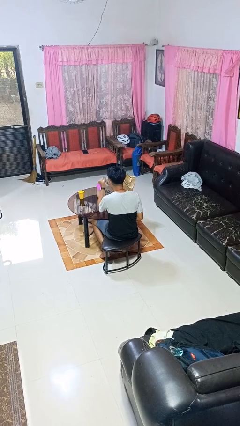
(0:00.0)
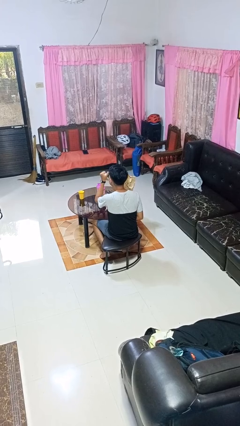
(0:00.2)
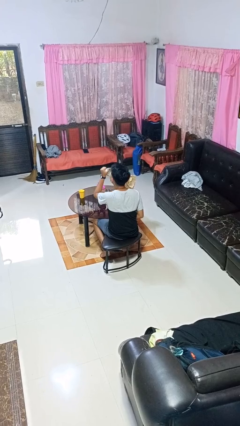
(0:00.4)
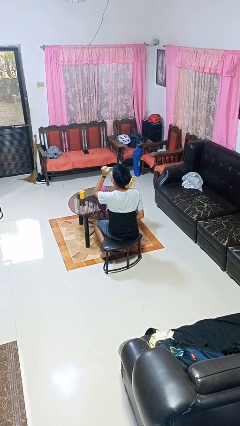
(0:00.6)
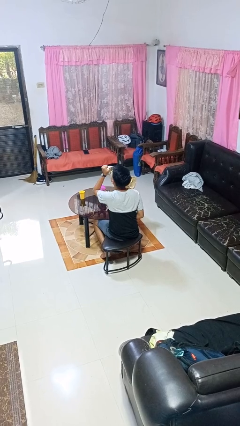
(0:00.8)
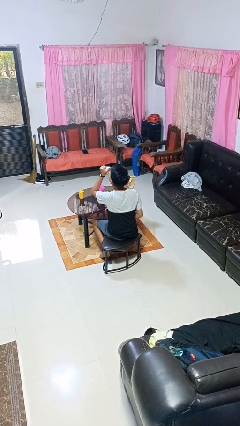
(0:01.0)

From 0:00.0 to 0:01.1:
person drinks from mug

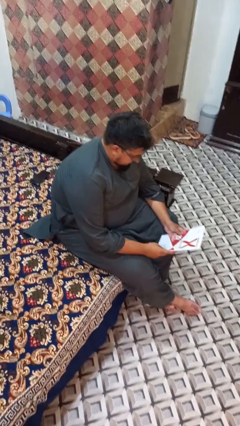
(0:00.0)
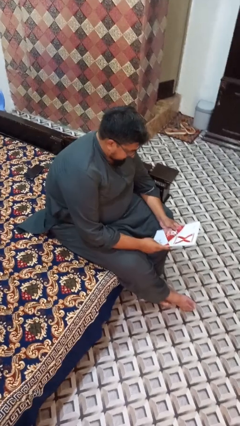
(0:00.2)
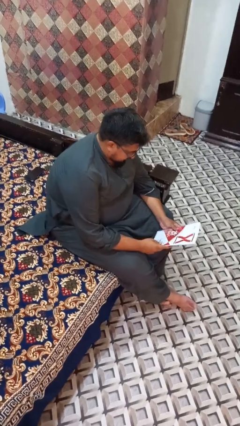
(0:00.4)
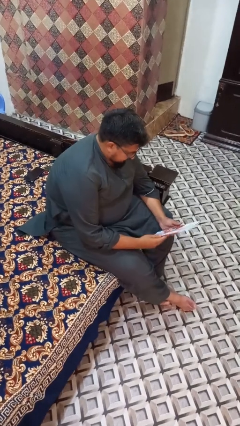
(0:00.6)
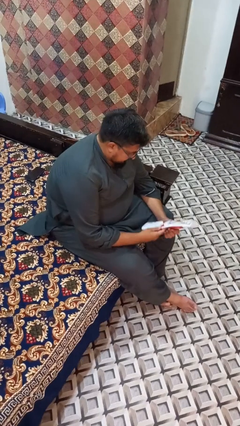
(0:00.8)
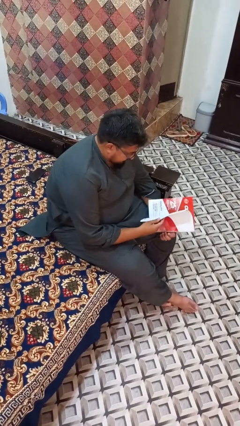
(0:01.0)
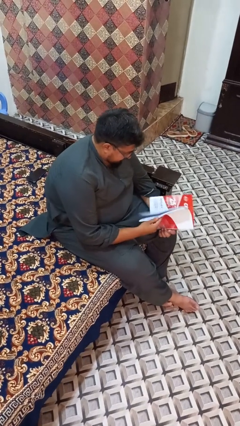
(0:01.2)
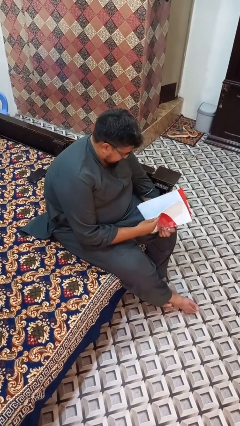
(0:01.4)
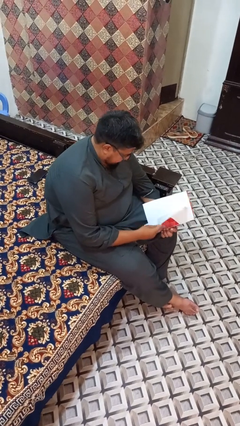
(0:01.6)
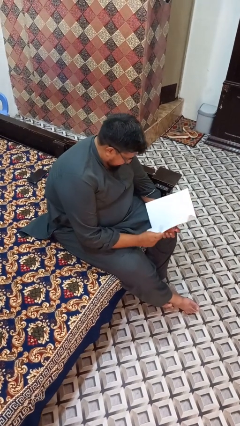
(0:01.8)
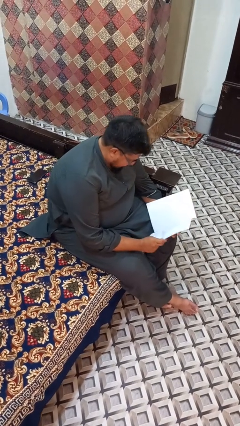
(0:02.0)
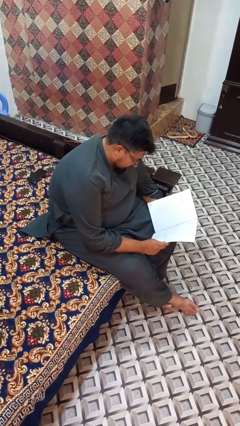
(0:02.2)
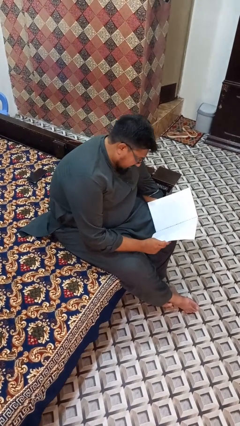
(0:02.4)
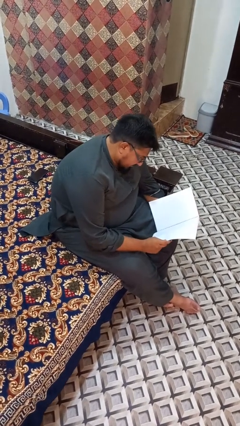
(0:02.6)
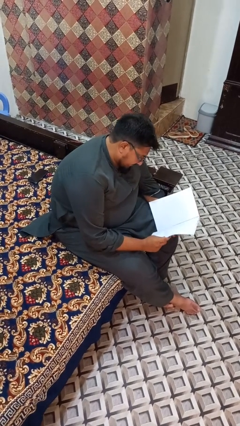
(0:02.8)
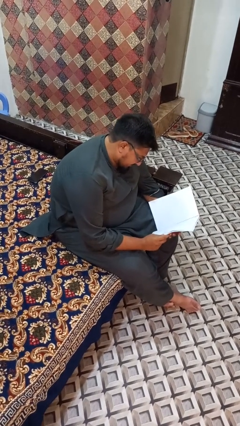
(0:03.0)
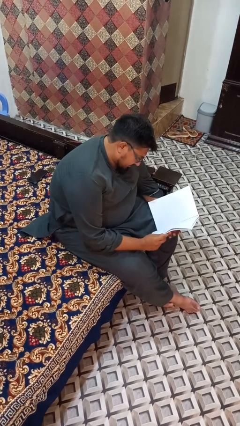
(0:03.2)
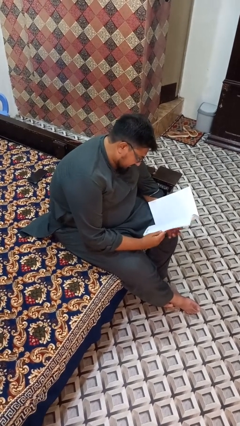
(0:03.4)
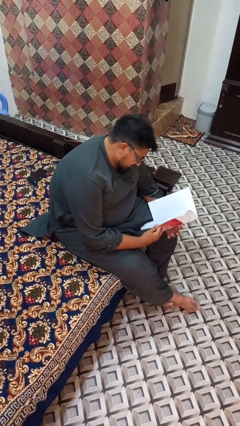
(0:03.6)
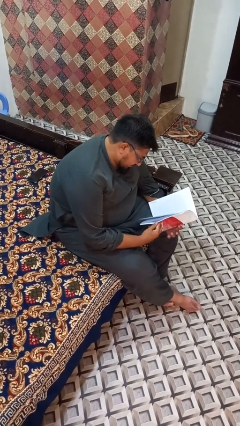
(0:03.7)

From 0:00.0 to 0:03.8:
person reads magazine

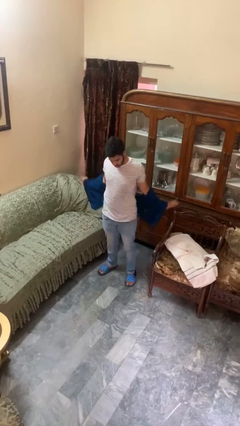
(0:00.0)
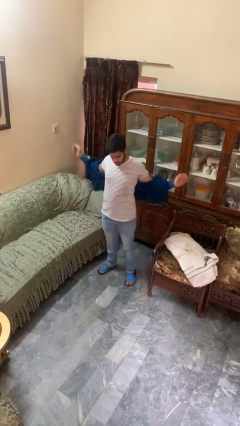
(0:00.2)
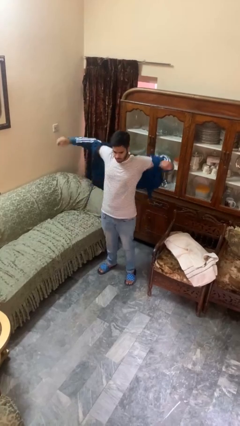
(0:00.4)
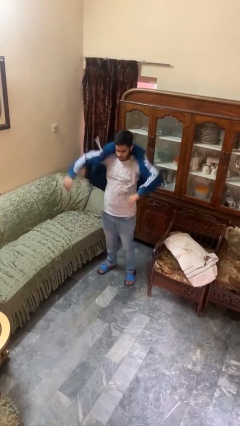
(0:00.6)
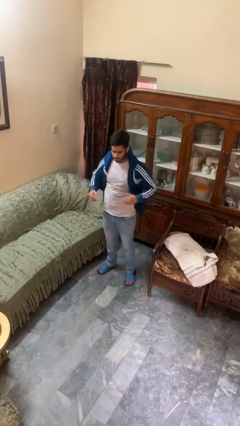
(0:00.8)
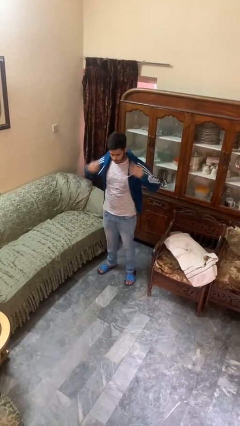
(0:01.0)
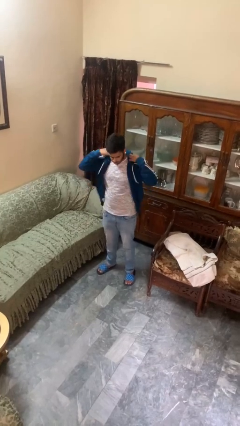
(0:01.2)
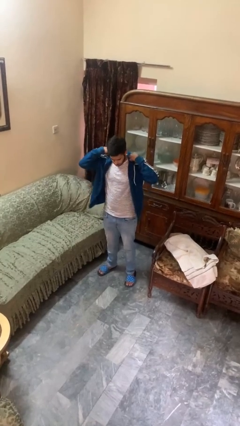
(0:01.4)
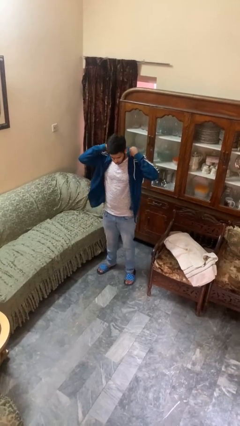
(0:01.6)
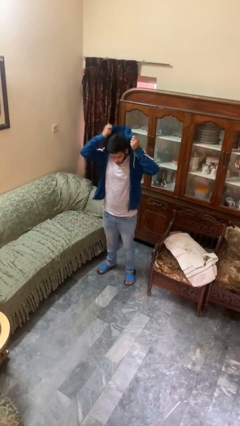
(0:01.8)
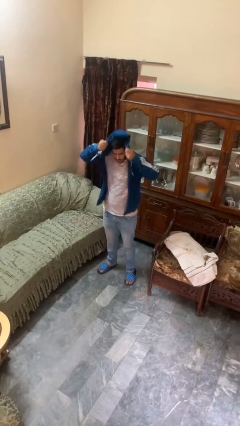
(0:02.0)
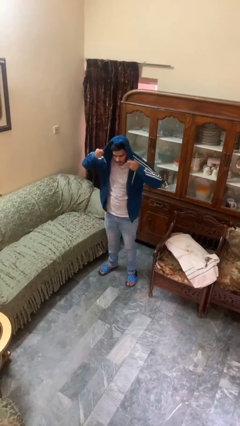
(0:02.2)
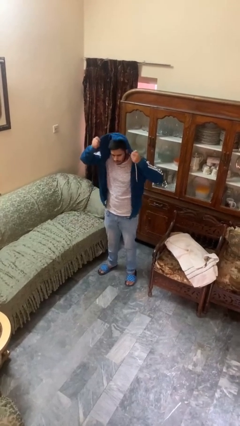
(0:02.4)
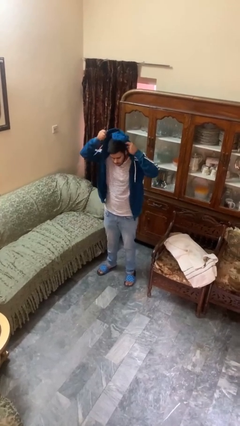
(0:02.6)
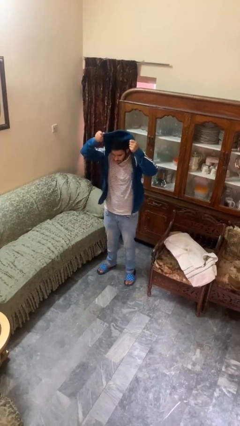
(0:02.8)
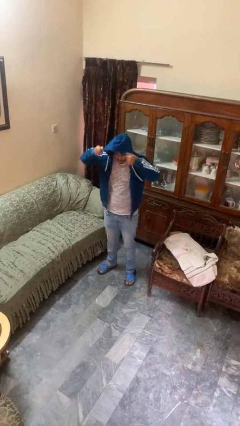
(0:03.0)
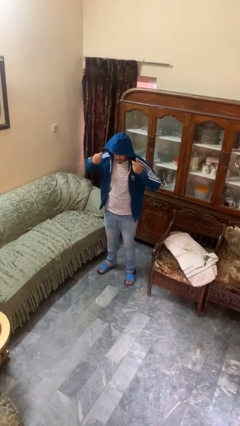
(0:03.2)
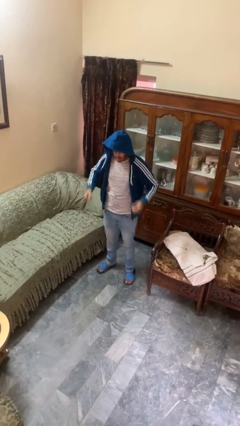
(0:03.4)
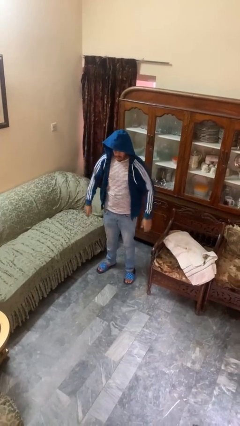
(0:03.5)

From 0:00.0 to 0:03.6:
person puts on hoodie

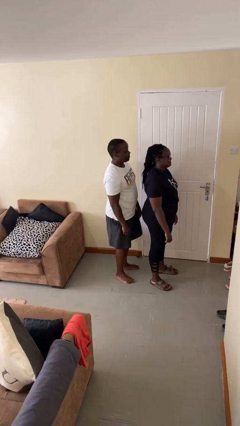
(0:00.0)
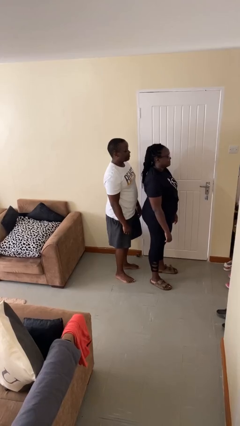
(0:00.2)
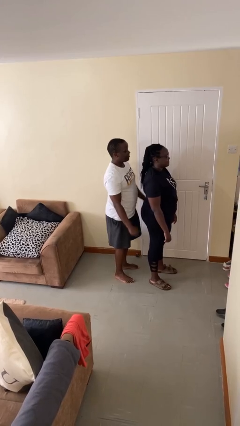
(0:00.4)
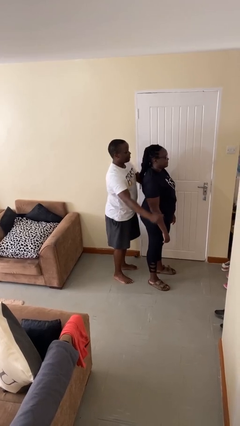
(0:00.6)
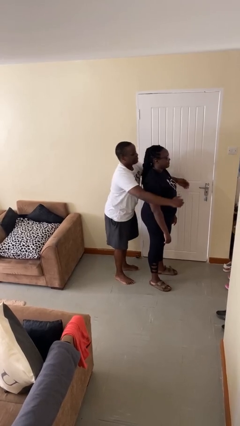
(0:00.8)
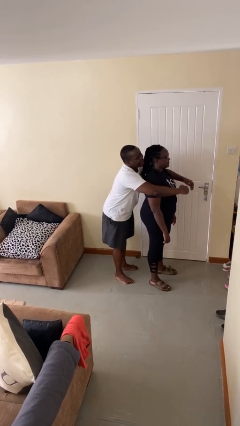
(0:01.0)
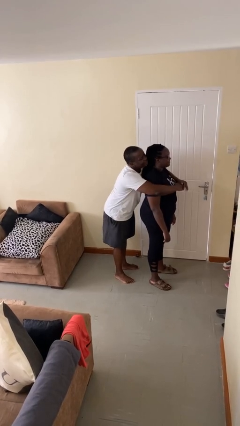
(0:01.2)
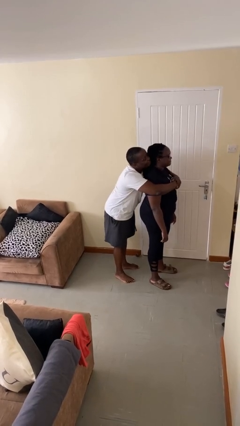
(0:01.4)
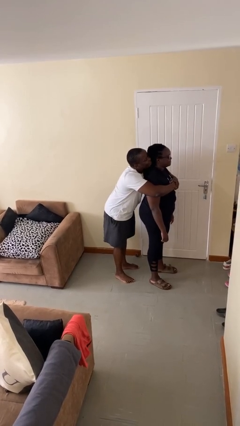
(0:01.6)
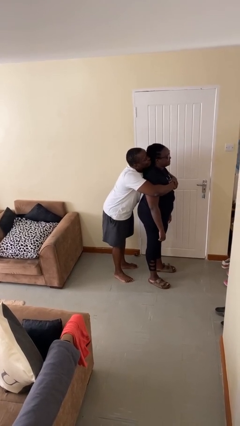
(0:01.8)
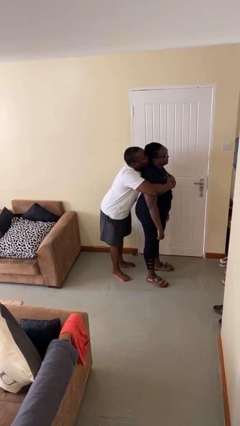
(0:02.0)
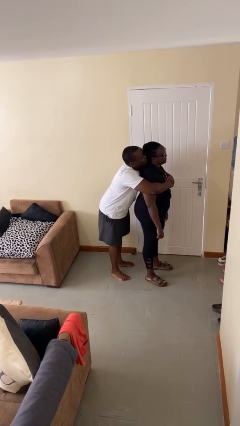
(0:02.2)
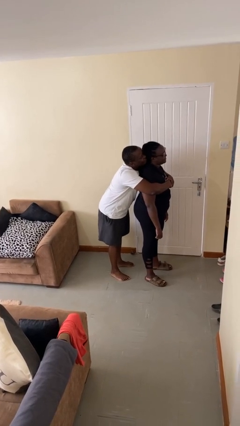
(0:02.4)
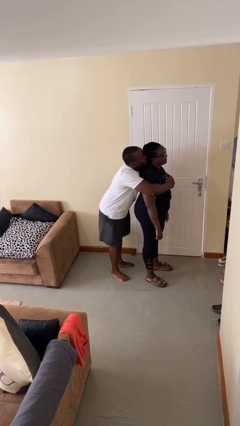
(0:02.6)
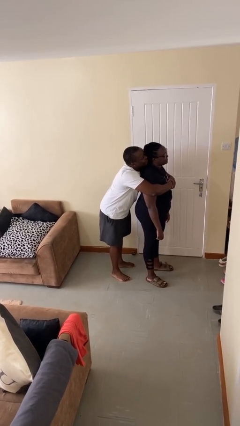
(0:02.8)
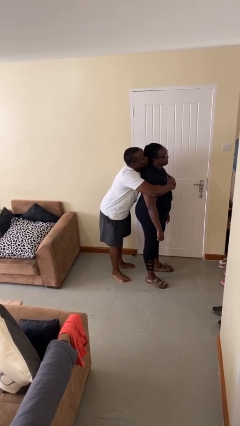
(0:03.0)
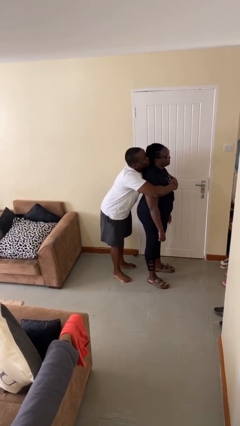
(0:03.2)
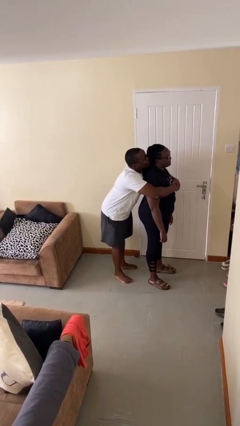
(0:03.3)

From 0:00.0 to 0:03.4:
person hugs person from behind

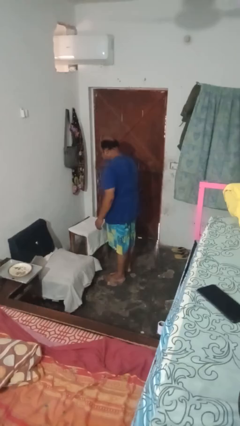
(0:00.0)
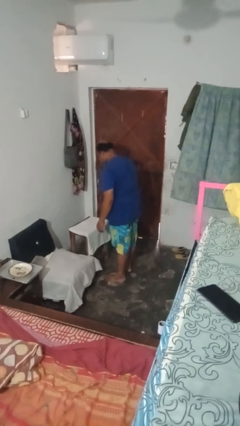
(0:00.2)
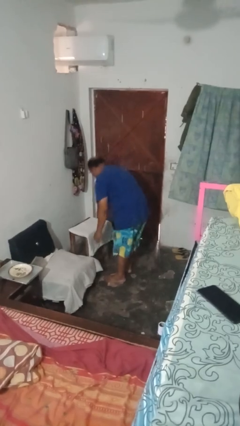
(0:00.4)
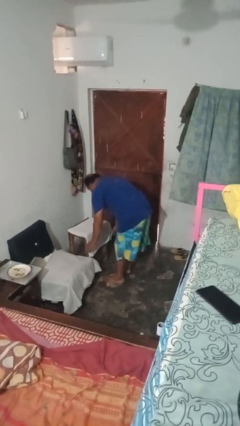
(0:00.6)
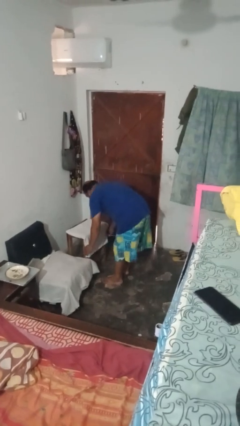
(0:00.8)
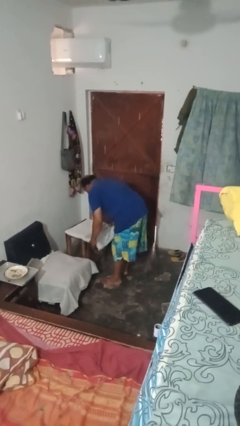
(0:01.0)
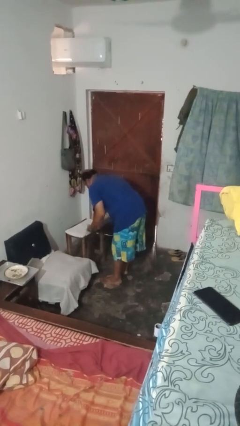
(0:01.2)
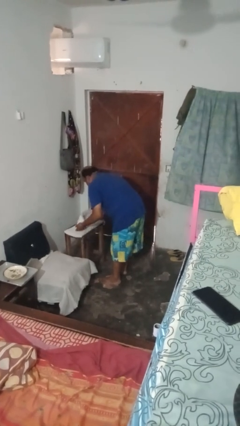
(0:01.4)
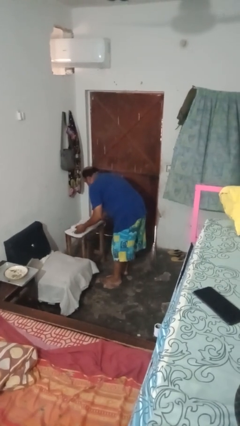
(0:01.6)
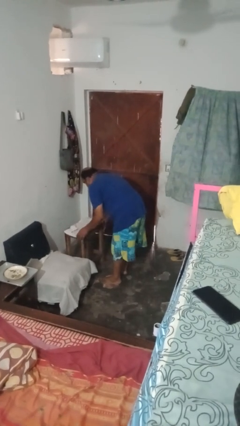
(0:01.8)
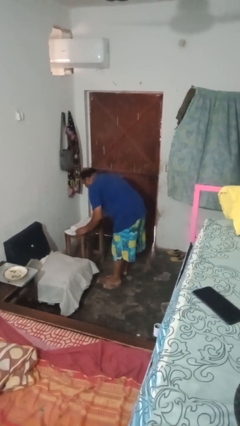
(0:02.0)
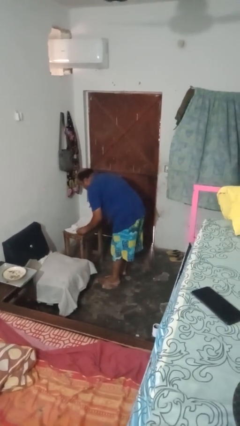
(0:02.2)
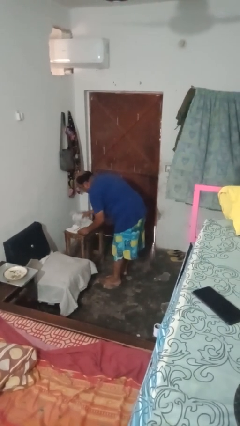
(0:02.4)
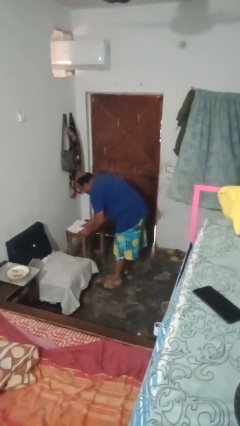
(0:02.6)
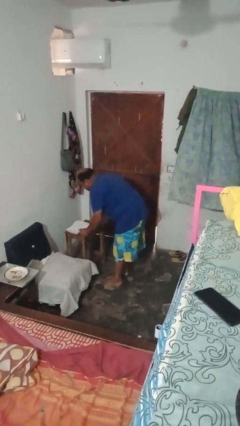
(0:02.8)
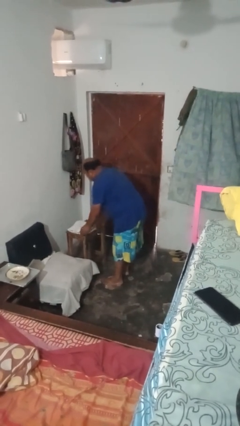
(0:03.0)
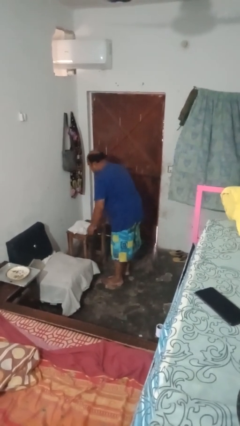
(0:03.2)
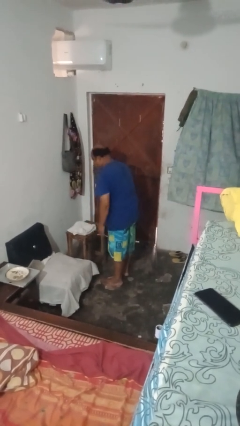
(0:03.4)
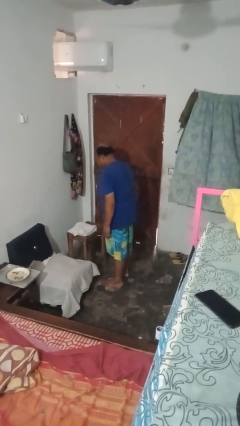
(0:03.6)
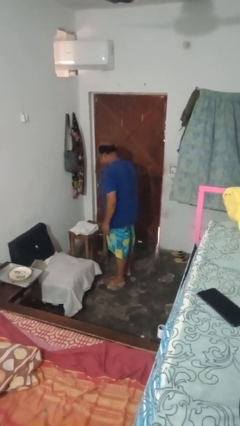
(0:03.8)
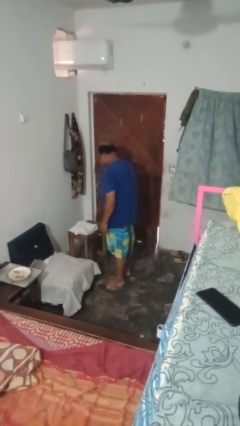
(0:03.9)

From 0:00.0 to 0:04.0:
person folds towel

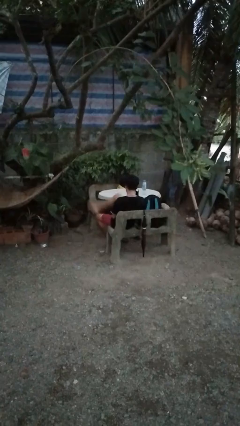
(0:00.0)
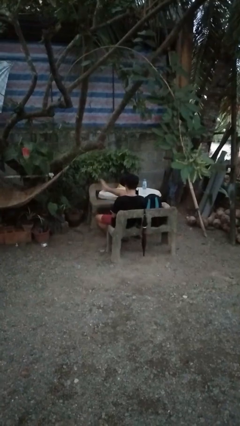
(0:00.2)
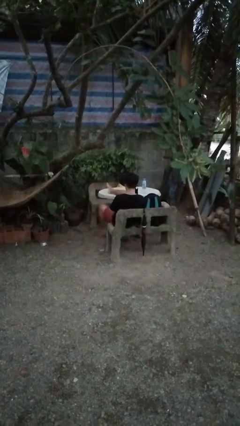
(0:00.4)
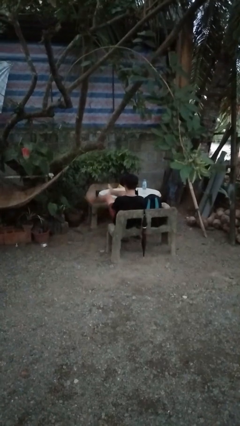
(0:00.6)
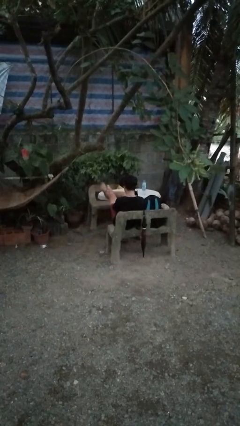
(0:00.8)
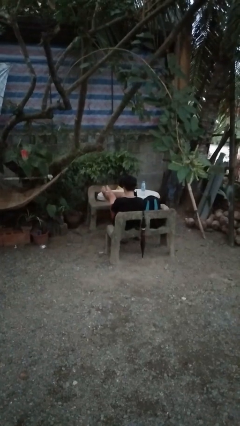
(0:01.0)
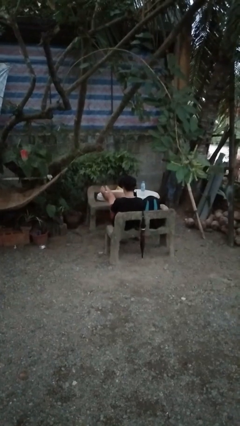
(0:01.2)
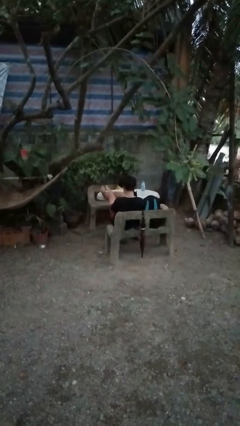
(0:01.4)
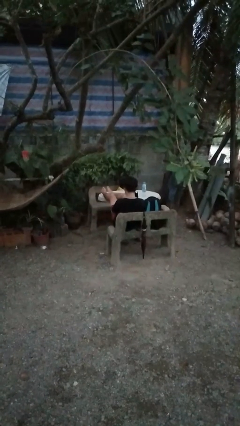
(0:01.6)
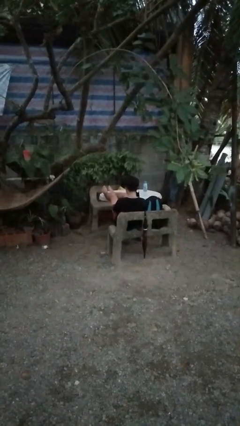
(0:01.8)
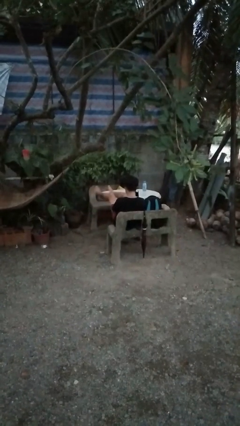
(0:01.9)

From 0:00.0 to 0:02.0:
person puts feet up
